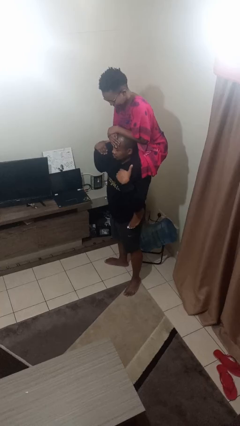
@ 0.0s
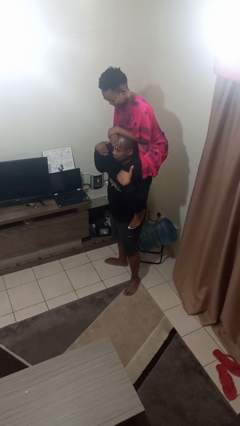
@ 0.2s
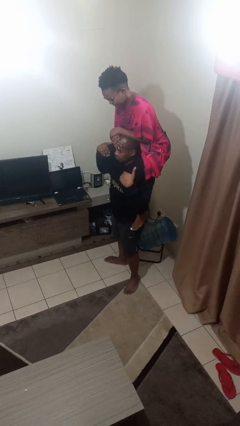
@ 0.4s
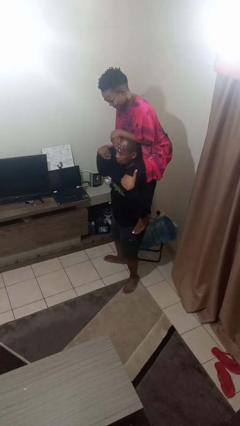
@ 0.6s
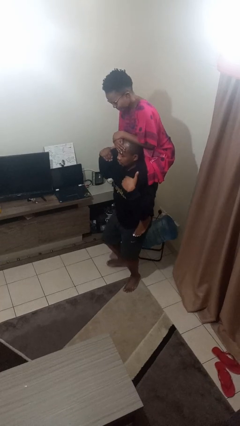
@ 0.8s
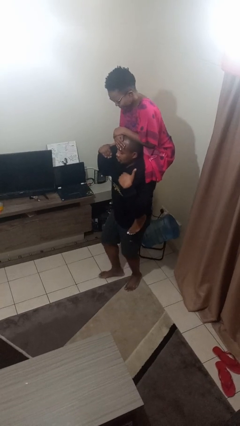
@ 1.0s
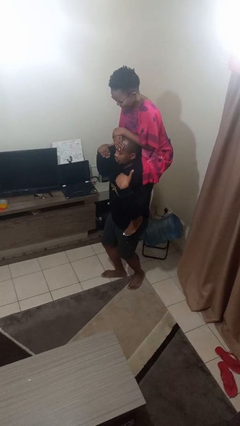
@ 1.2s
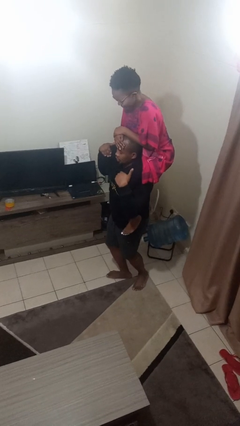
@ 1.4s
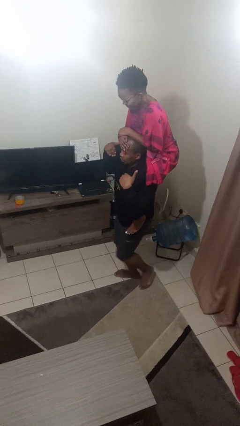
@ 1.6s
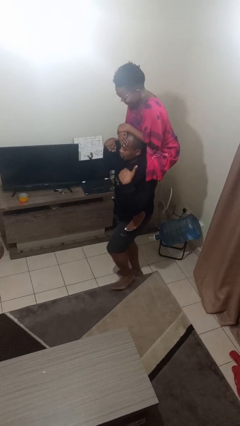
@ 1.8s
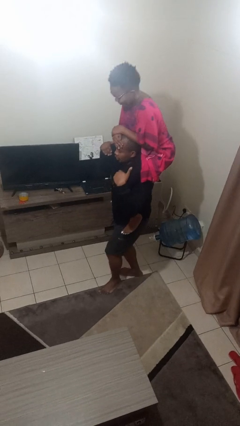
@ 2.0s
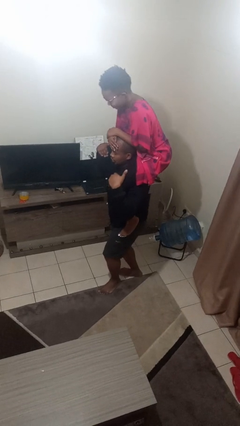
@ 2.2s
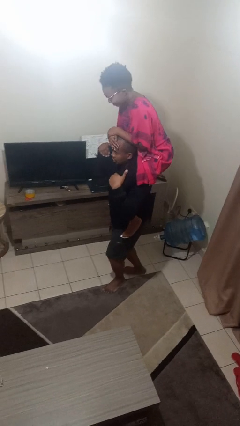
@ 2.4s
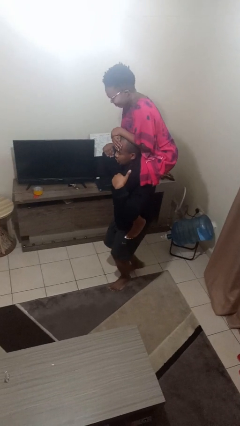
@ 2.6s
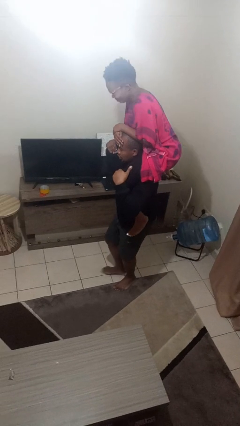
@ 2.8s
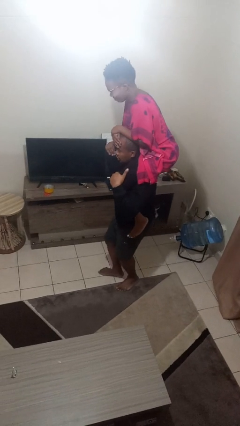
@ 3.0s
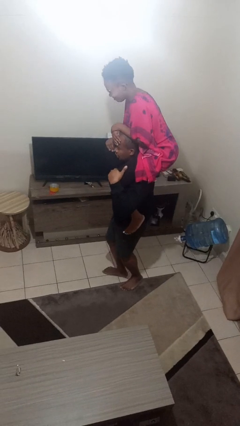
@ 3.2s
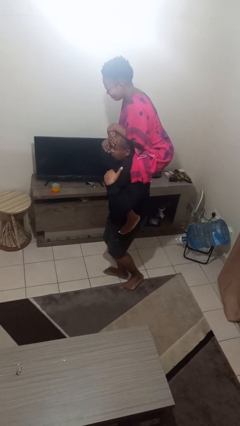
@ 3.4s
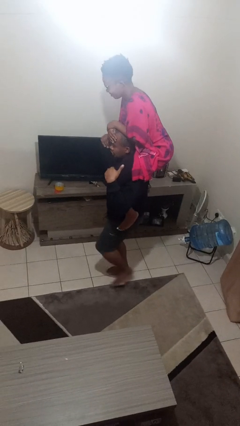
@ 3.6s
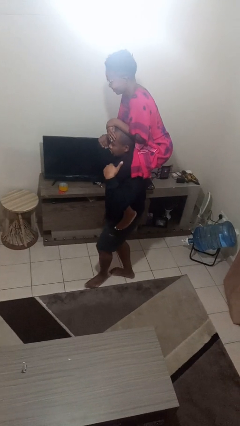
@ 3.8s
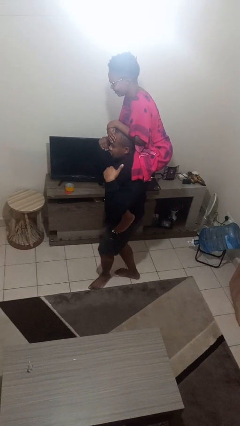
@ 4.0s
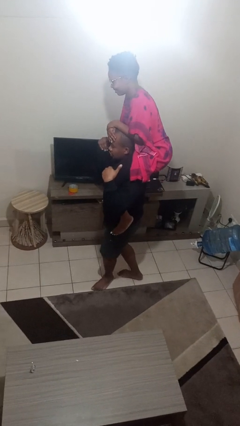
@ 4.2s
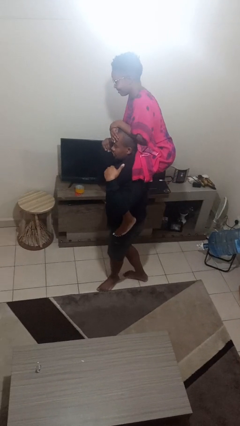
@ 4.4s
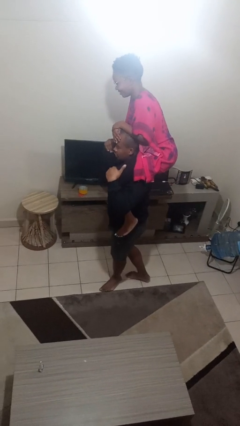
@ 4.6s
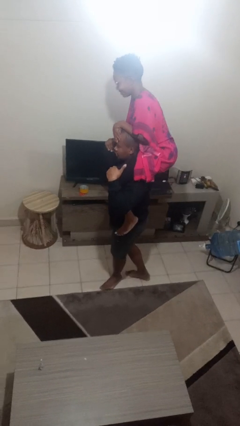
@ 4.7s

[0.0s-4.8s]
person carries person on shoulders

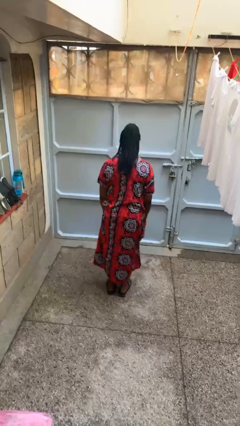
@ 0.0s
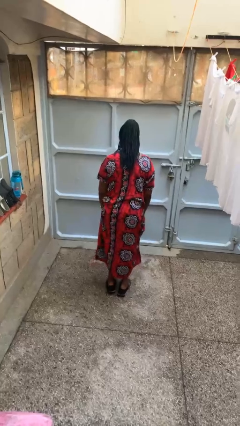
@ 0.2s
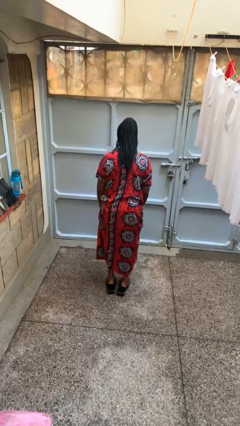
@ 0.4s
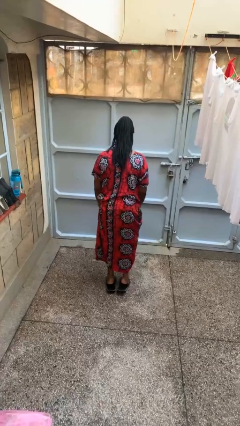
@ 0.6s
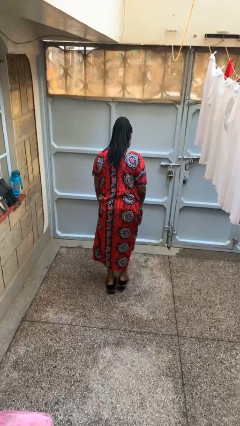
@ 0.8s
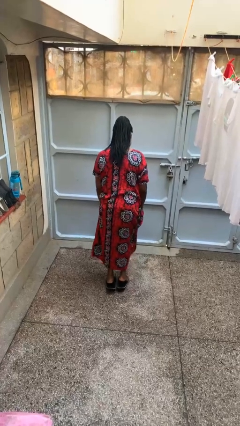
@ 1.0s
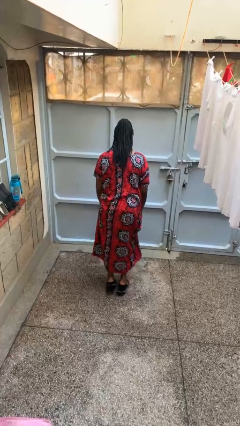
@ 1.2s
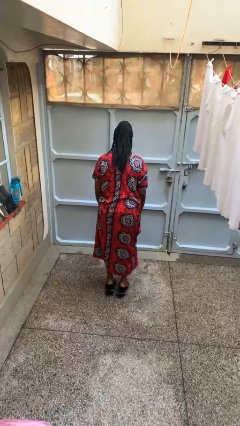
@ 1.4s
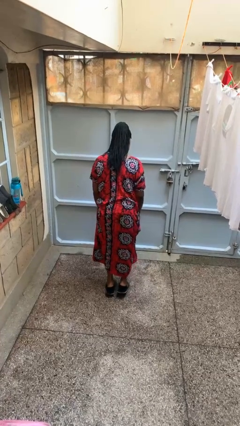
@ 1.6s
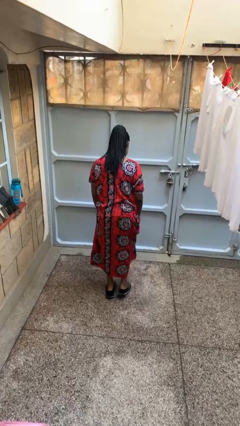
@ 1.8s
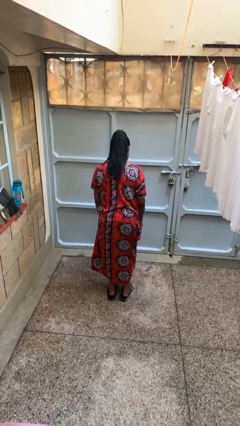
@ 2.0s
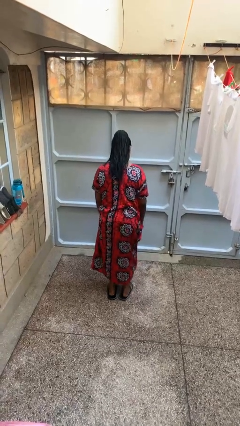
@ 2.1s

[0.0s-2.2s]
person walks tiptoe

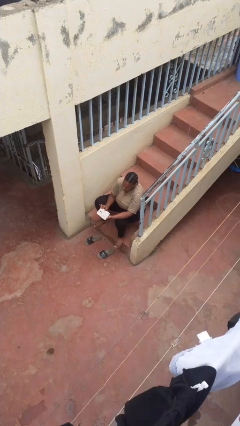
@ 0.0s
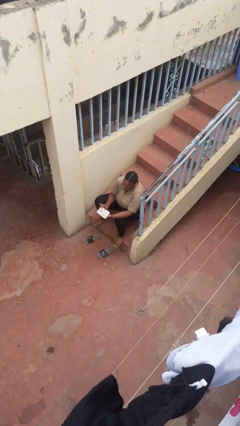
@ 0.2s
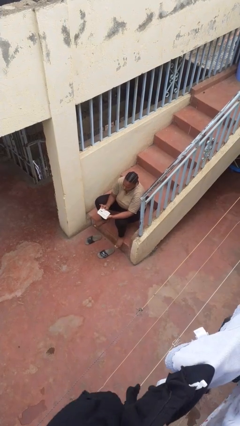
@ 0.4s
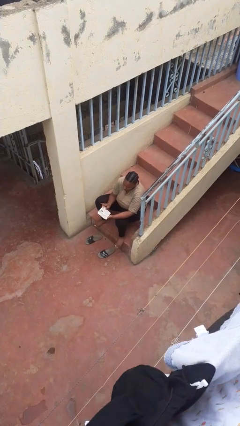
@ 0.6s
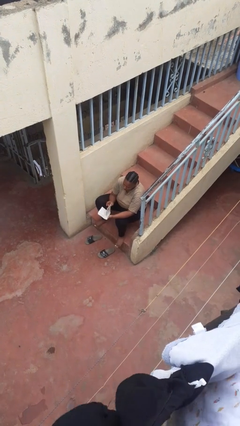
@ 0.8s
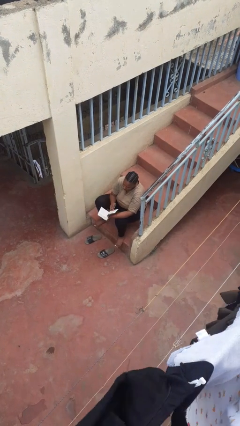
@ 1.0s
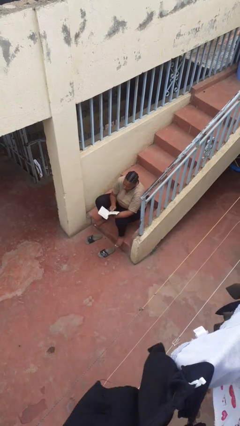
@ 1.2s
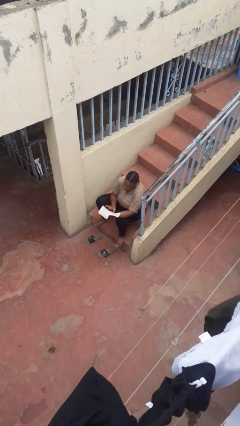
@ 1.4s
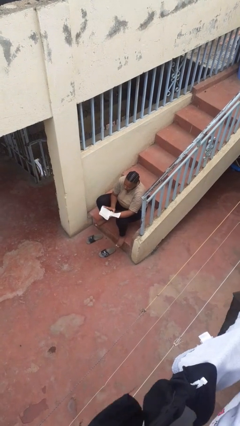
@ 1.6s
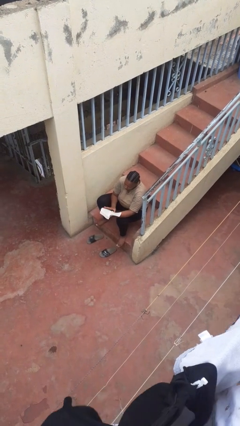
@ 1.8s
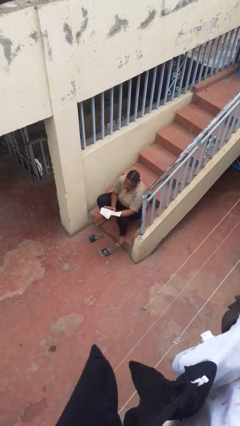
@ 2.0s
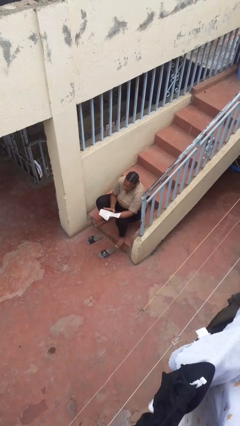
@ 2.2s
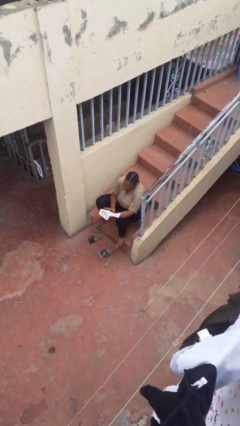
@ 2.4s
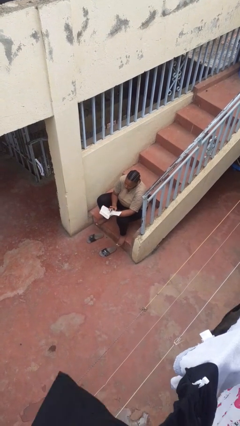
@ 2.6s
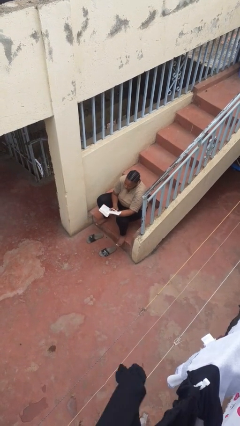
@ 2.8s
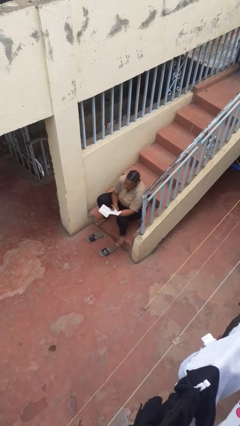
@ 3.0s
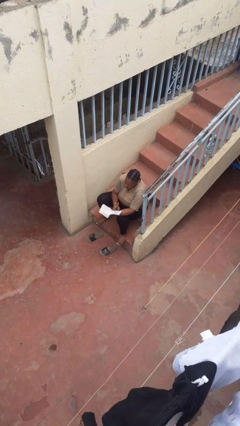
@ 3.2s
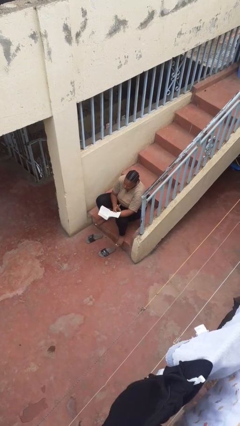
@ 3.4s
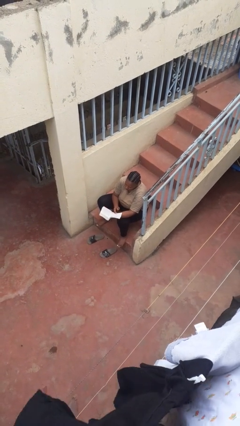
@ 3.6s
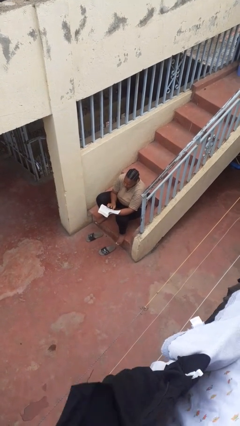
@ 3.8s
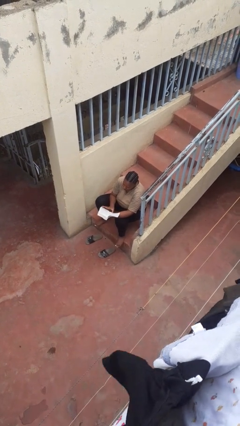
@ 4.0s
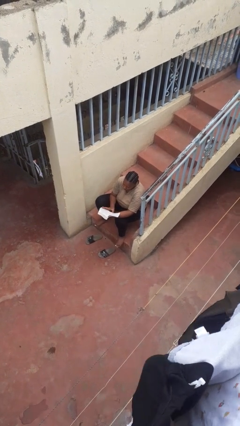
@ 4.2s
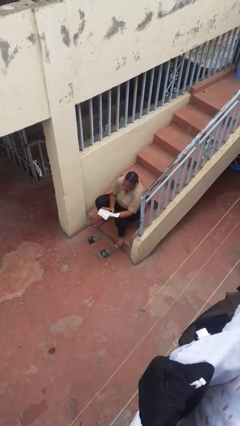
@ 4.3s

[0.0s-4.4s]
person reads book

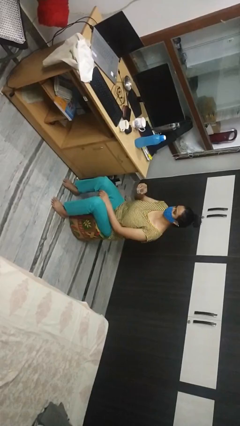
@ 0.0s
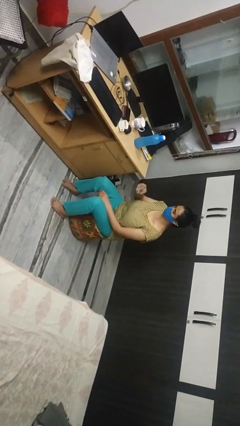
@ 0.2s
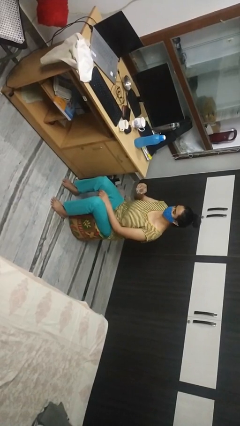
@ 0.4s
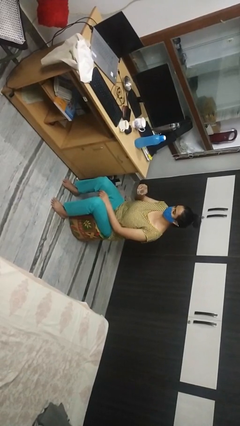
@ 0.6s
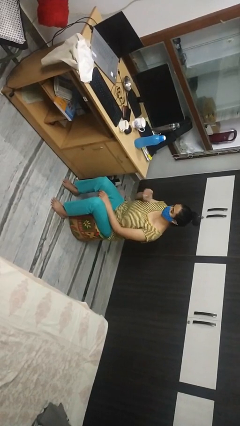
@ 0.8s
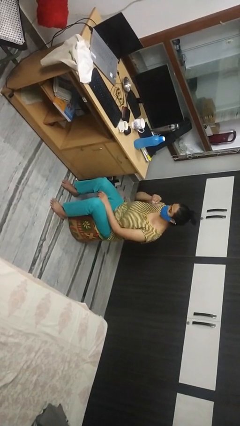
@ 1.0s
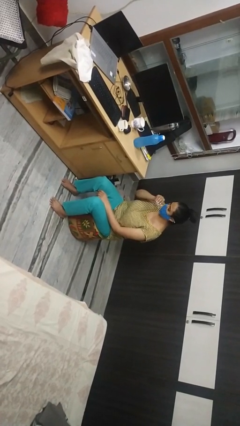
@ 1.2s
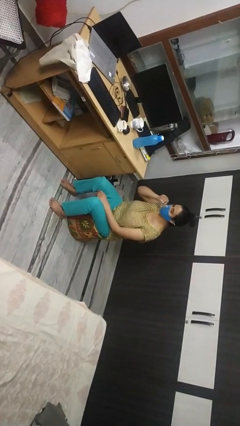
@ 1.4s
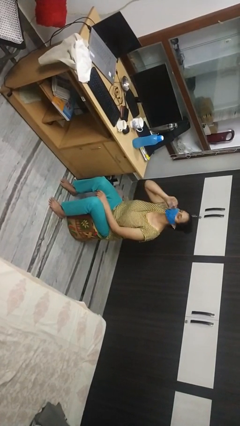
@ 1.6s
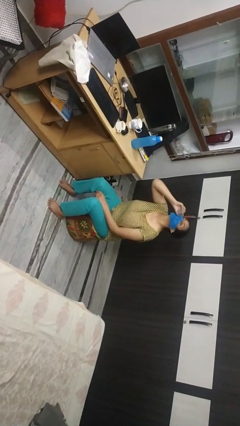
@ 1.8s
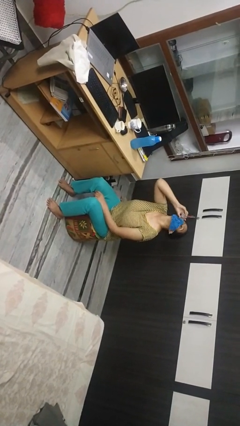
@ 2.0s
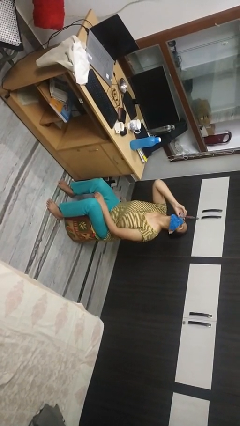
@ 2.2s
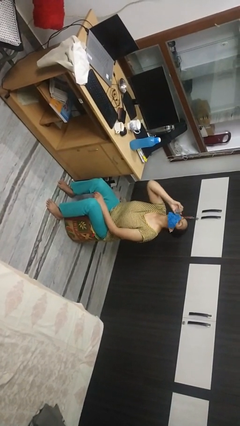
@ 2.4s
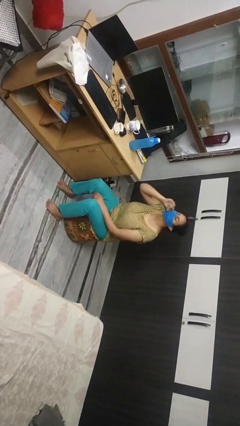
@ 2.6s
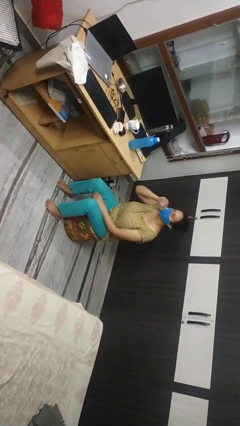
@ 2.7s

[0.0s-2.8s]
person drinks from shotglass

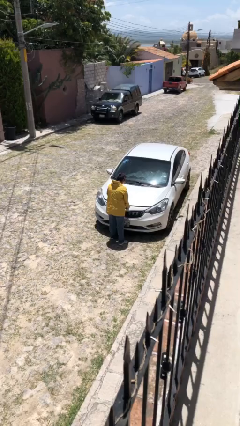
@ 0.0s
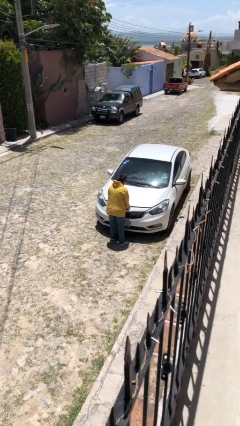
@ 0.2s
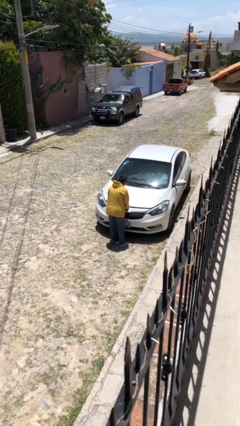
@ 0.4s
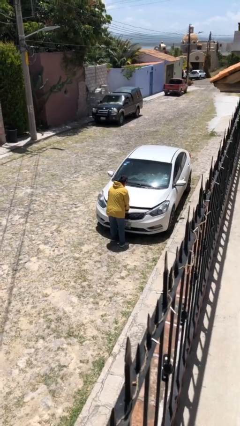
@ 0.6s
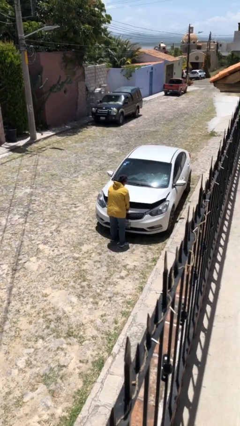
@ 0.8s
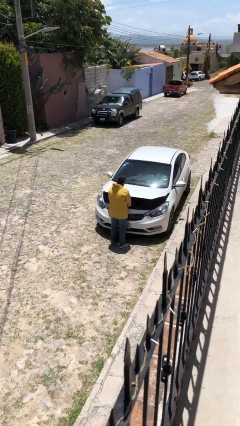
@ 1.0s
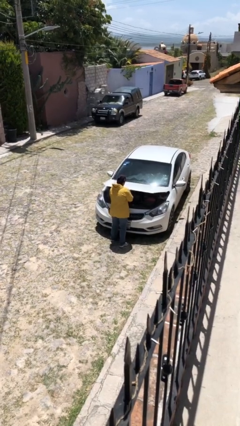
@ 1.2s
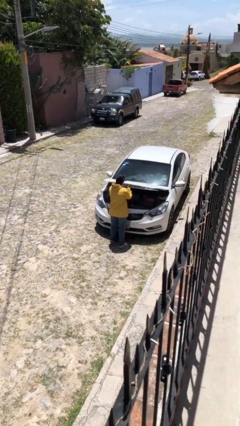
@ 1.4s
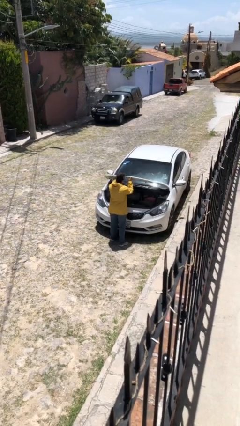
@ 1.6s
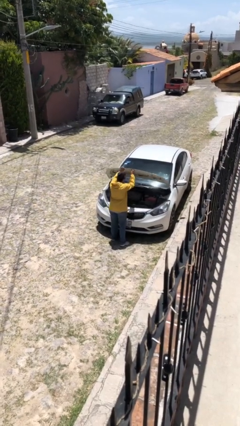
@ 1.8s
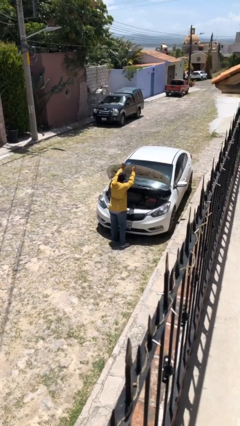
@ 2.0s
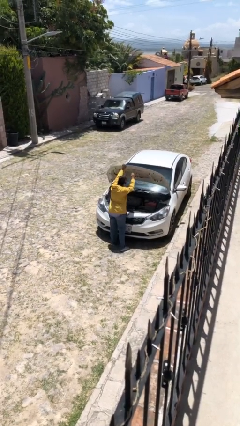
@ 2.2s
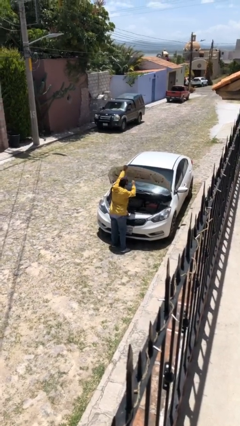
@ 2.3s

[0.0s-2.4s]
person opens car hood

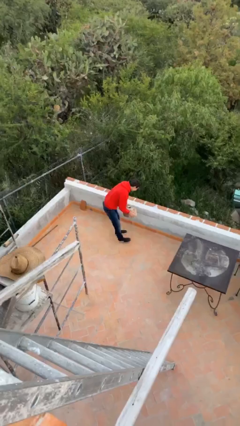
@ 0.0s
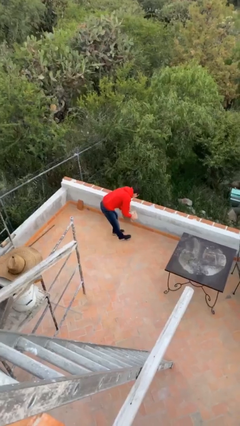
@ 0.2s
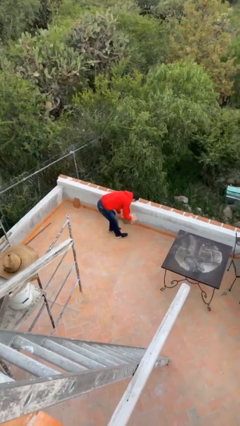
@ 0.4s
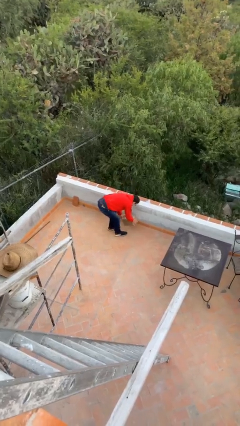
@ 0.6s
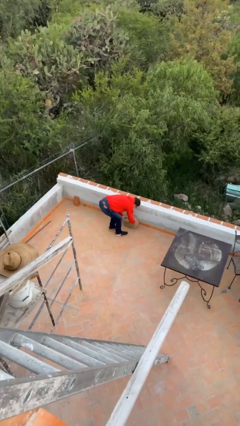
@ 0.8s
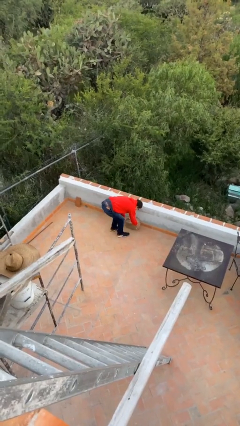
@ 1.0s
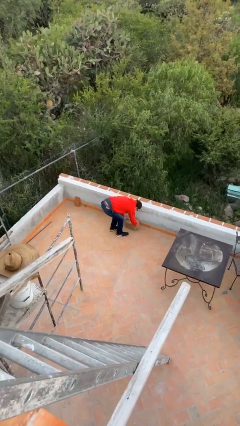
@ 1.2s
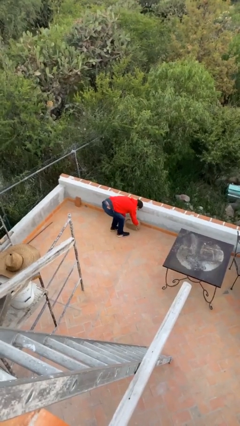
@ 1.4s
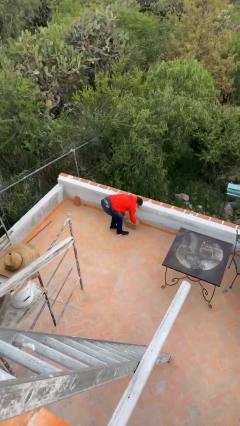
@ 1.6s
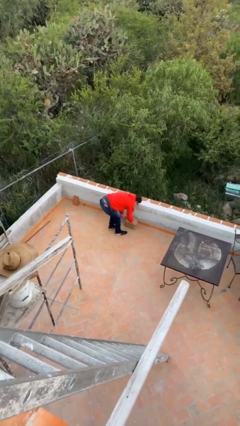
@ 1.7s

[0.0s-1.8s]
person puts down object on floor
